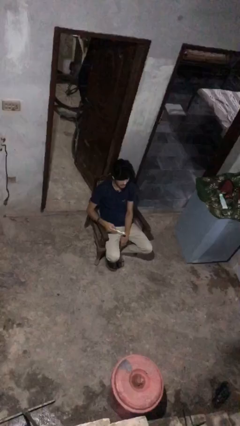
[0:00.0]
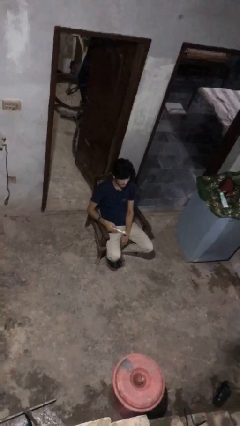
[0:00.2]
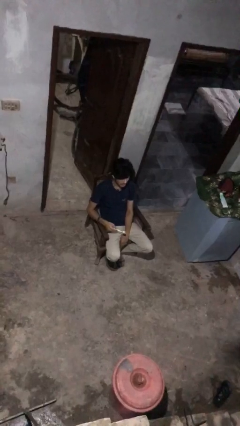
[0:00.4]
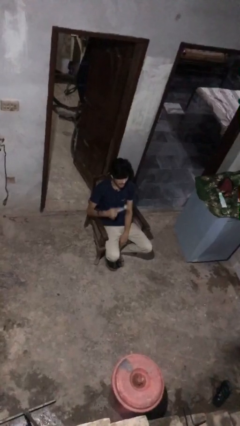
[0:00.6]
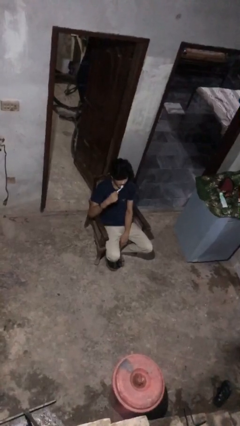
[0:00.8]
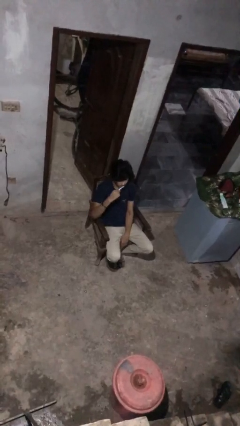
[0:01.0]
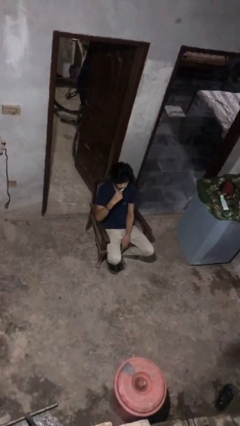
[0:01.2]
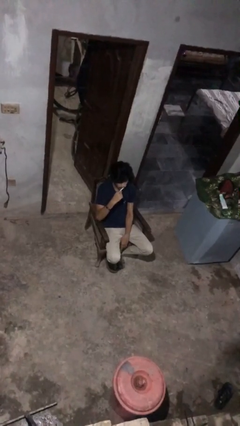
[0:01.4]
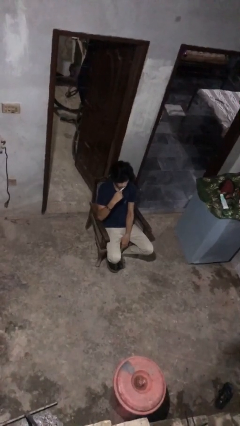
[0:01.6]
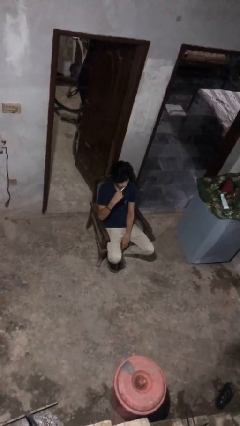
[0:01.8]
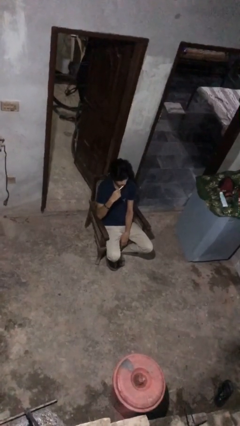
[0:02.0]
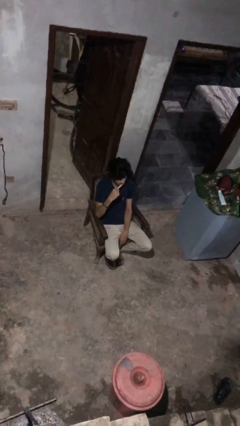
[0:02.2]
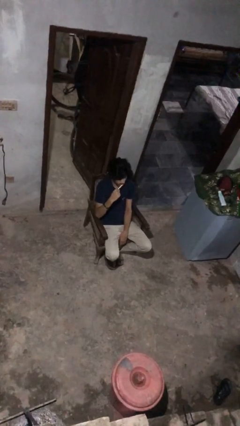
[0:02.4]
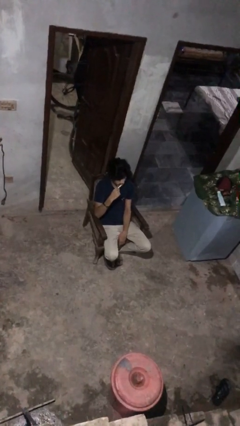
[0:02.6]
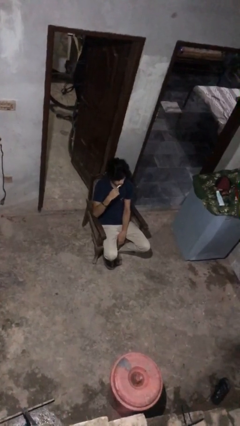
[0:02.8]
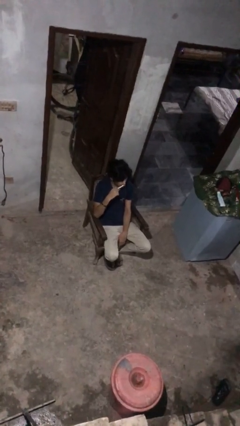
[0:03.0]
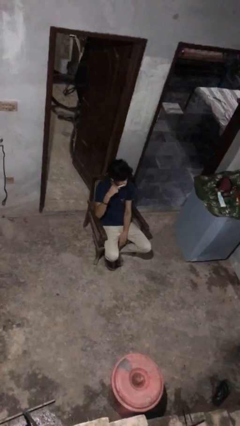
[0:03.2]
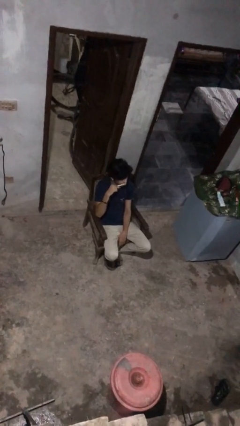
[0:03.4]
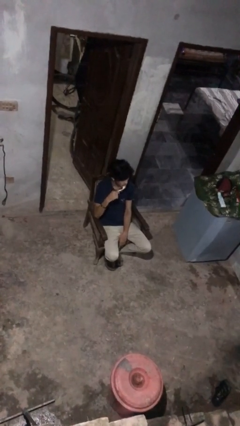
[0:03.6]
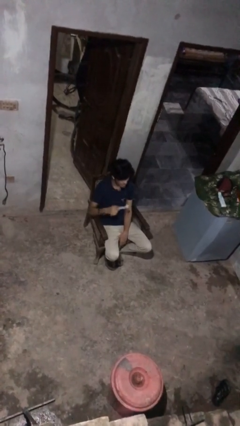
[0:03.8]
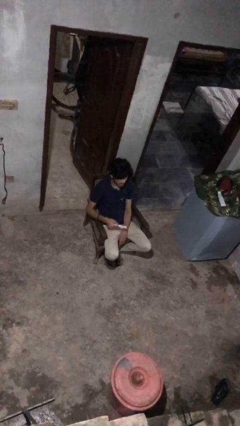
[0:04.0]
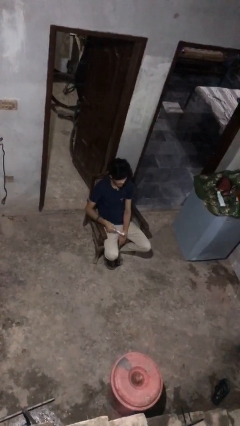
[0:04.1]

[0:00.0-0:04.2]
person brushes teeth

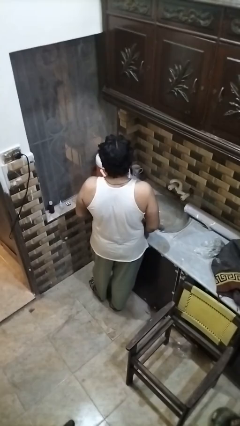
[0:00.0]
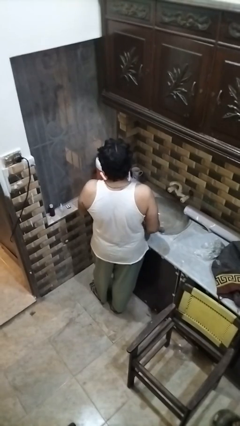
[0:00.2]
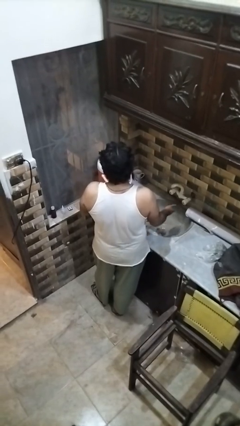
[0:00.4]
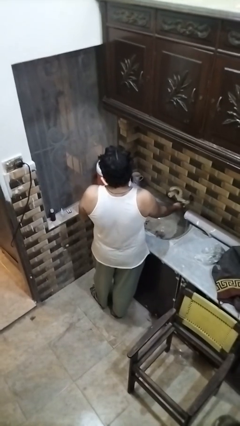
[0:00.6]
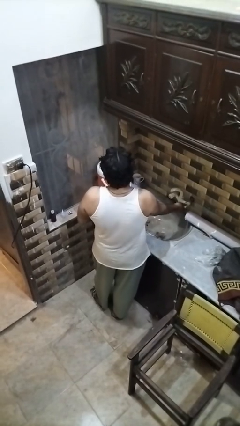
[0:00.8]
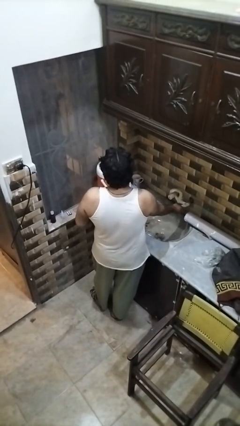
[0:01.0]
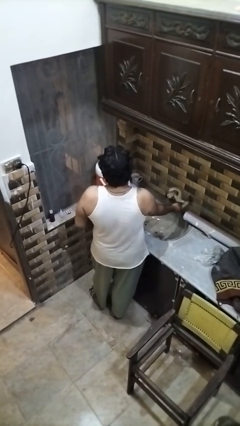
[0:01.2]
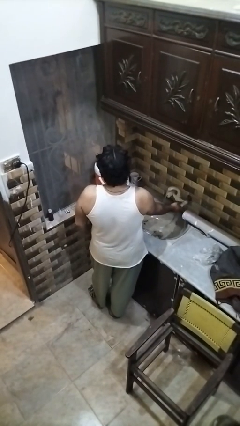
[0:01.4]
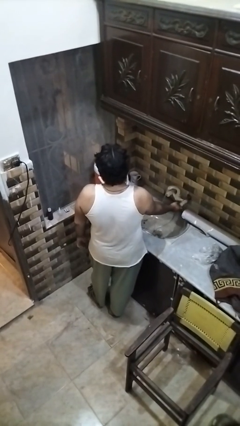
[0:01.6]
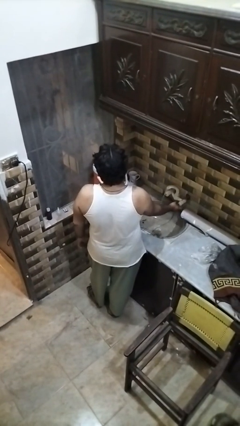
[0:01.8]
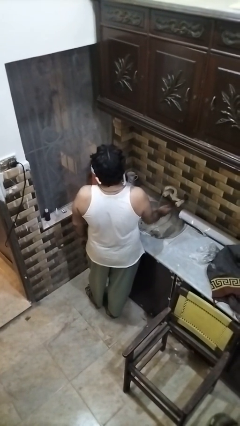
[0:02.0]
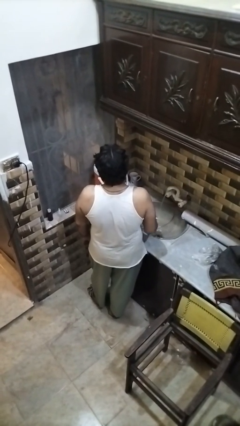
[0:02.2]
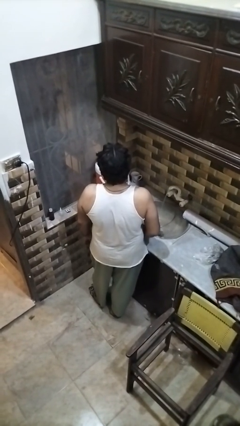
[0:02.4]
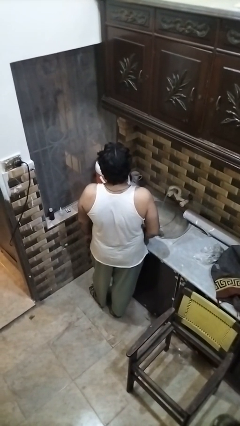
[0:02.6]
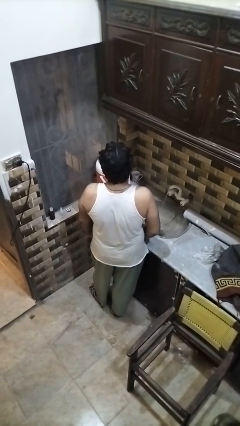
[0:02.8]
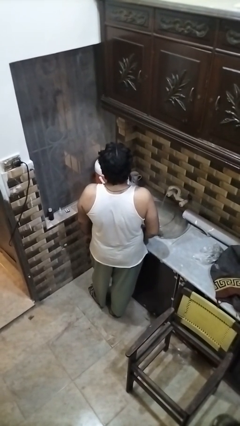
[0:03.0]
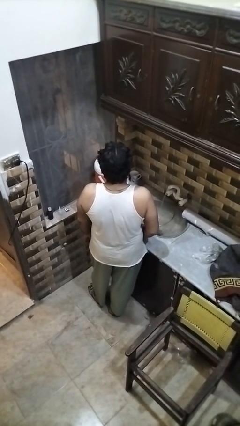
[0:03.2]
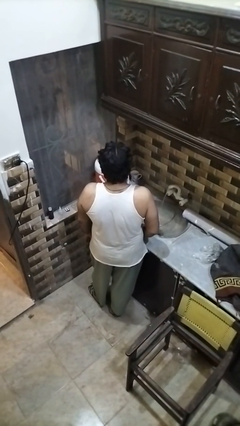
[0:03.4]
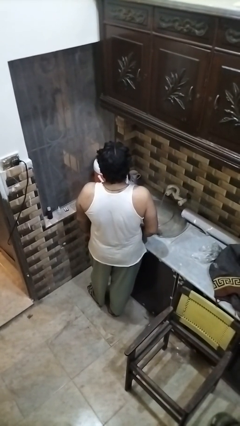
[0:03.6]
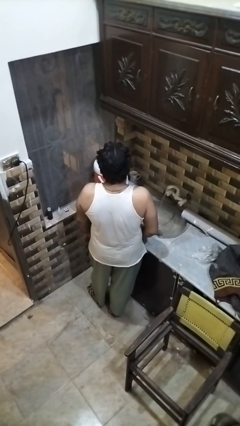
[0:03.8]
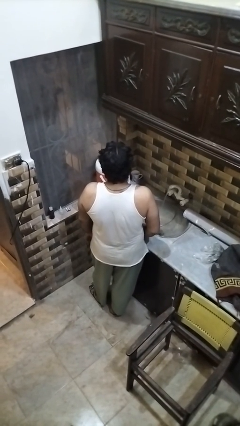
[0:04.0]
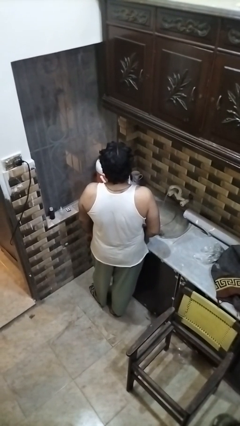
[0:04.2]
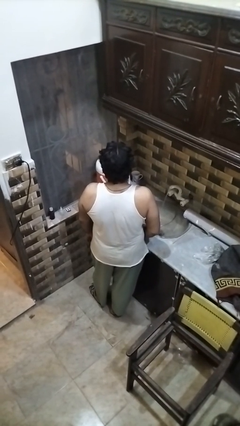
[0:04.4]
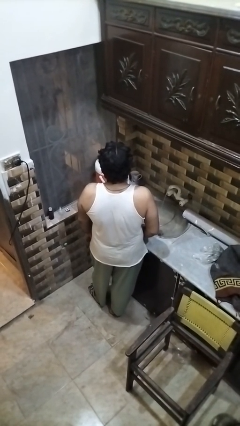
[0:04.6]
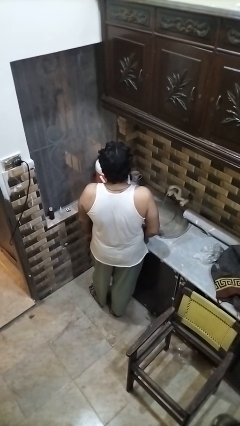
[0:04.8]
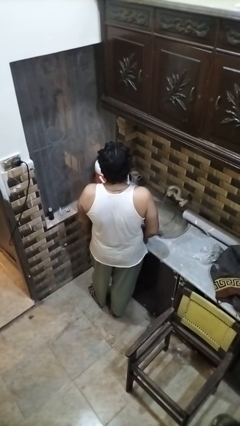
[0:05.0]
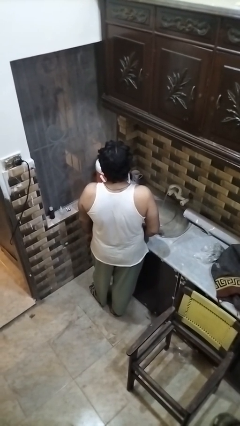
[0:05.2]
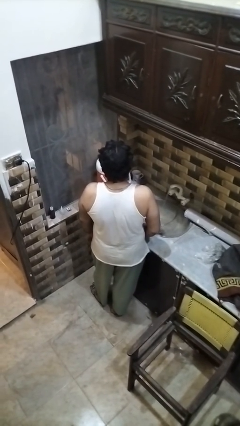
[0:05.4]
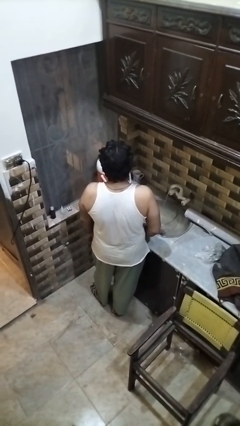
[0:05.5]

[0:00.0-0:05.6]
person turns on faucet

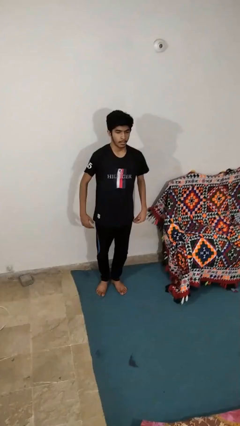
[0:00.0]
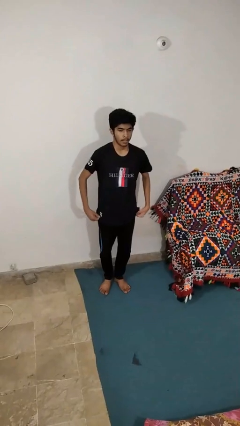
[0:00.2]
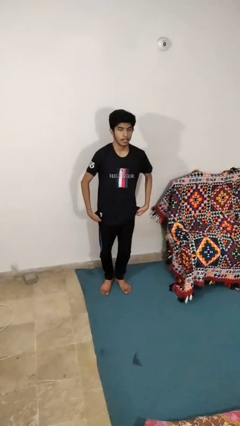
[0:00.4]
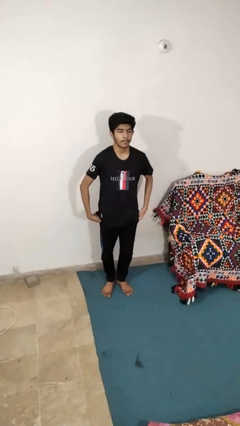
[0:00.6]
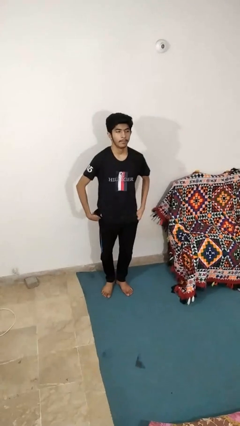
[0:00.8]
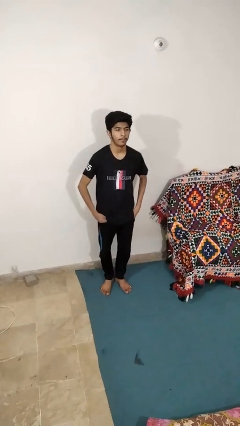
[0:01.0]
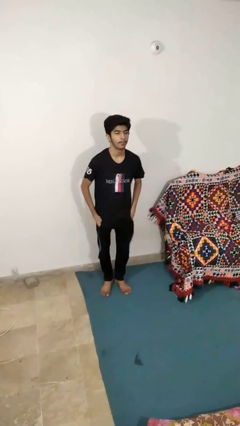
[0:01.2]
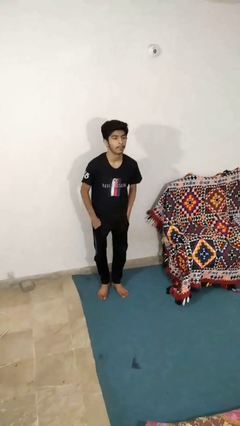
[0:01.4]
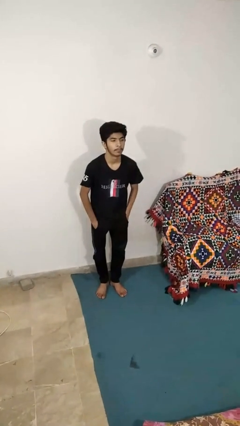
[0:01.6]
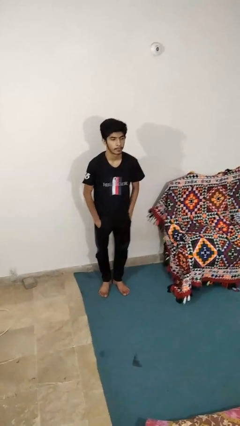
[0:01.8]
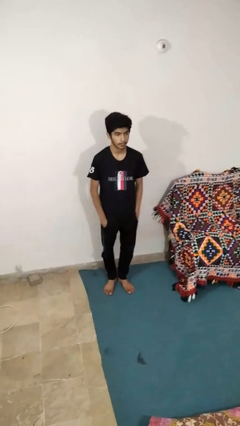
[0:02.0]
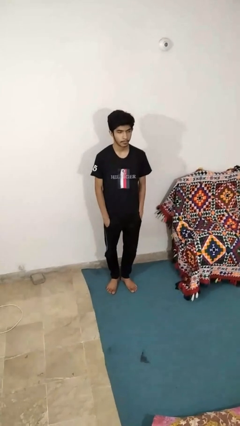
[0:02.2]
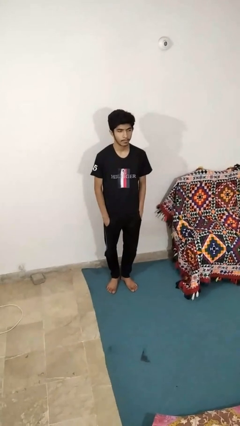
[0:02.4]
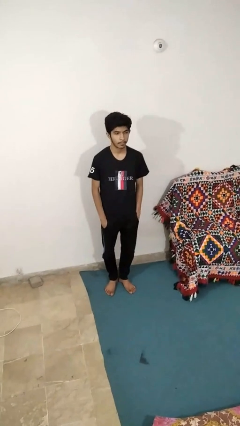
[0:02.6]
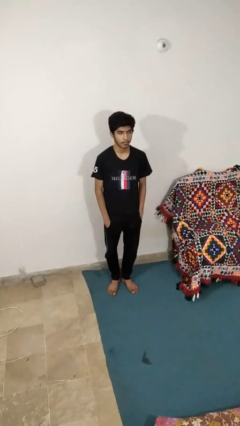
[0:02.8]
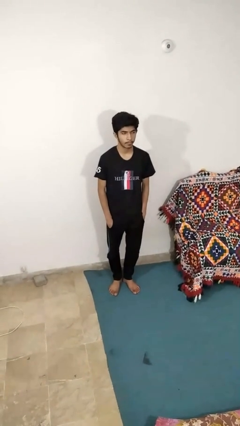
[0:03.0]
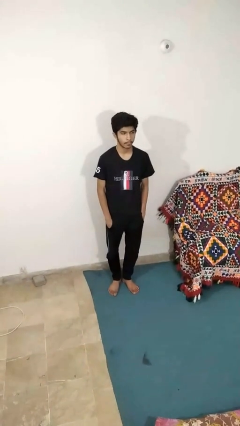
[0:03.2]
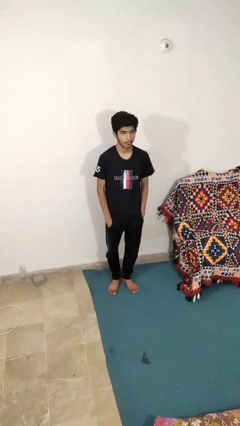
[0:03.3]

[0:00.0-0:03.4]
person puts hands in back pockets

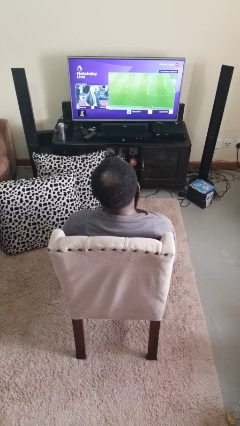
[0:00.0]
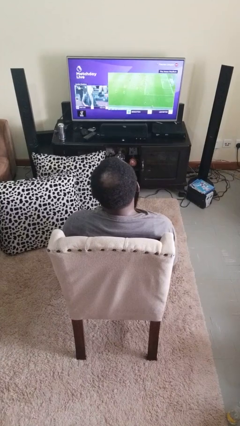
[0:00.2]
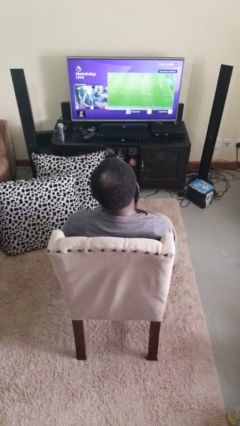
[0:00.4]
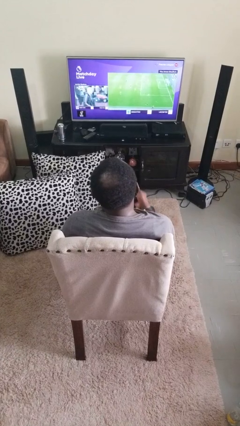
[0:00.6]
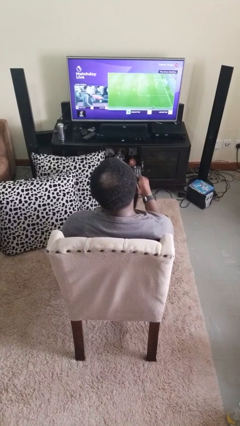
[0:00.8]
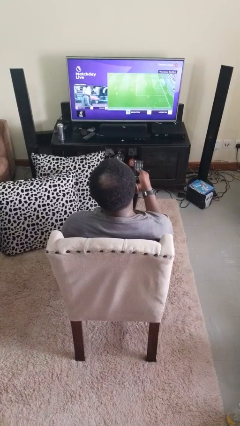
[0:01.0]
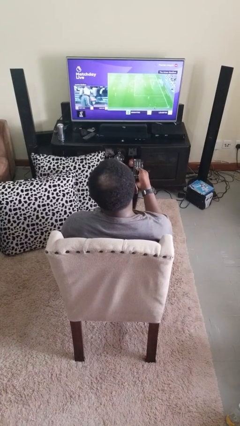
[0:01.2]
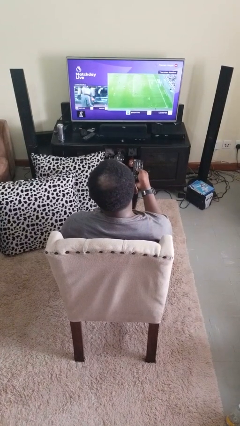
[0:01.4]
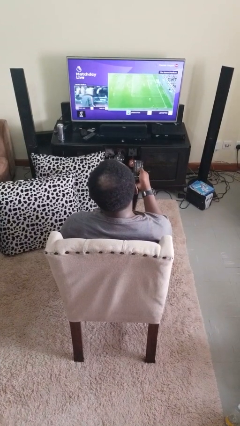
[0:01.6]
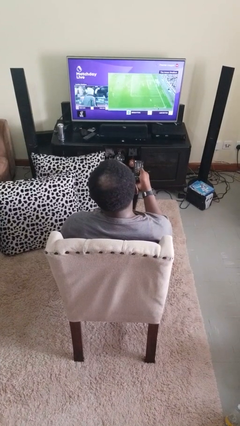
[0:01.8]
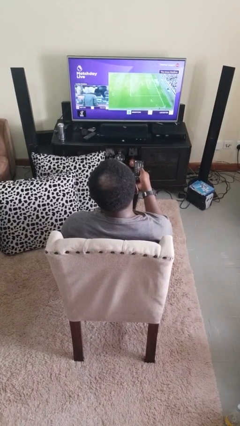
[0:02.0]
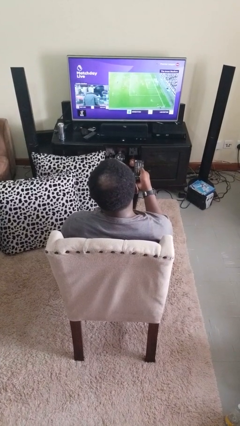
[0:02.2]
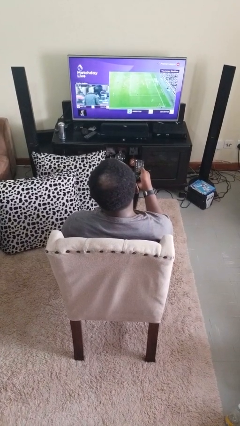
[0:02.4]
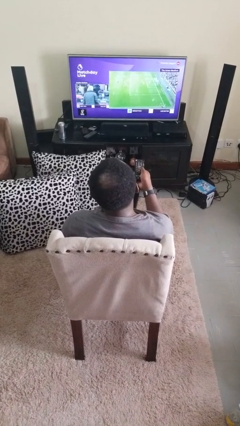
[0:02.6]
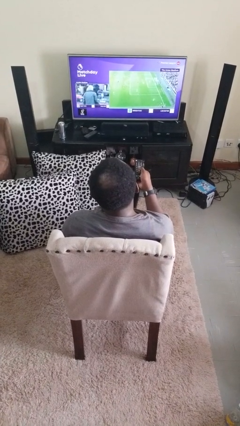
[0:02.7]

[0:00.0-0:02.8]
person uses television remote

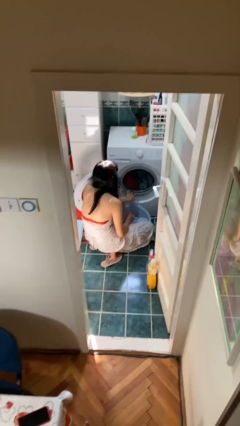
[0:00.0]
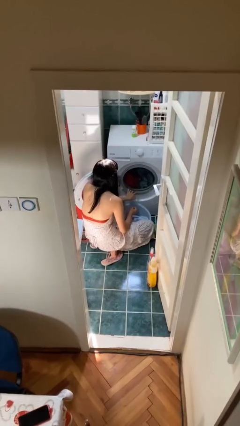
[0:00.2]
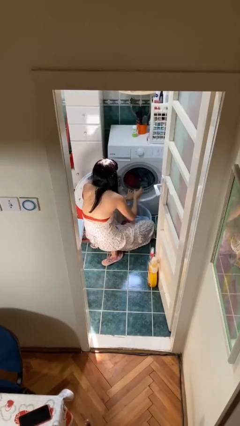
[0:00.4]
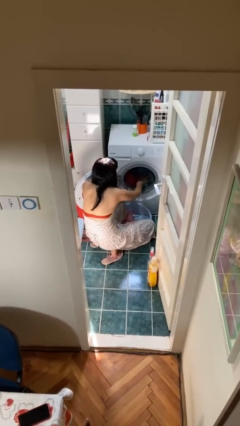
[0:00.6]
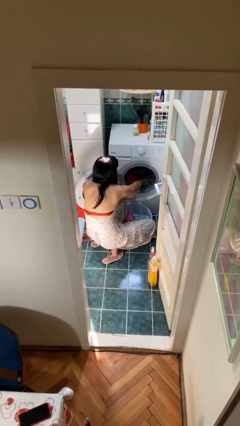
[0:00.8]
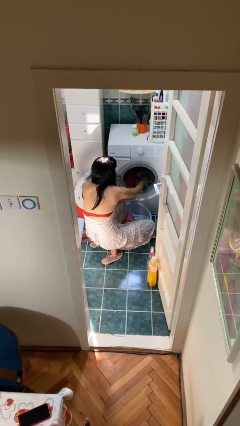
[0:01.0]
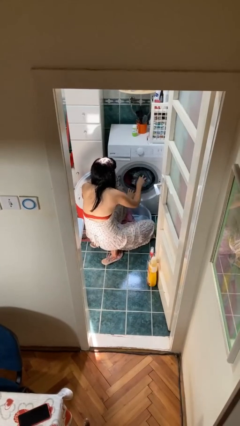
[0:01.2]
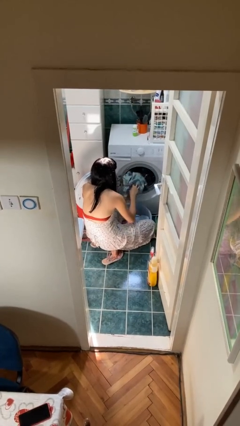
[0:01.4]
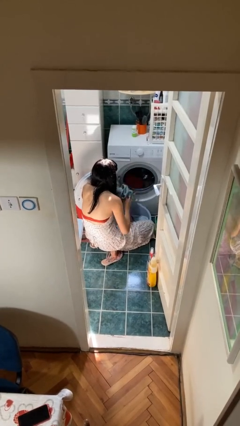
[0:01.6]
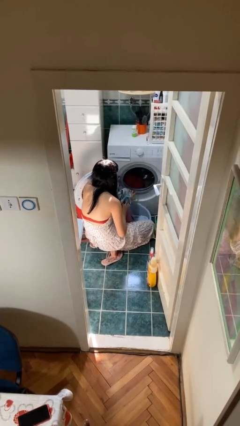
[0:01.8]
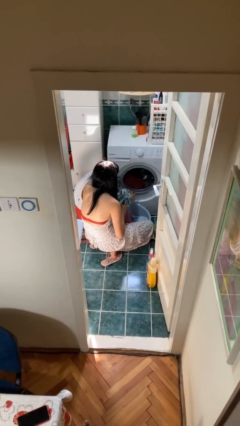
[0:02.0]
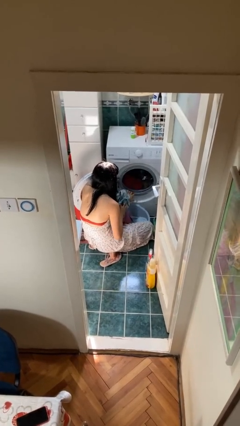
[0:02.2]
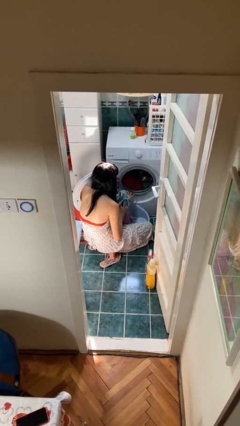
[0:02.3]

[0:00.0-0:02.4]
person loads clotheswasher
